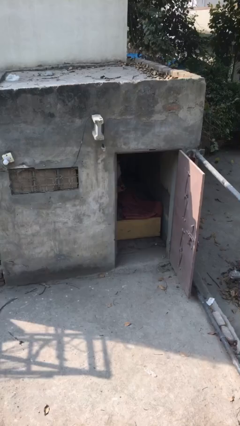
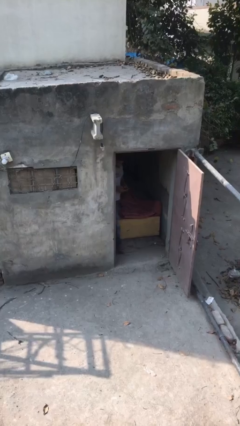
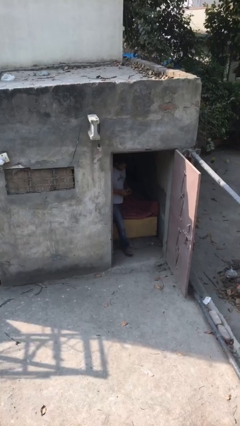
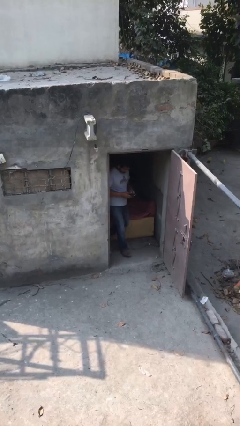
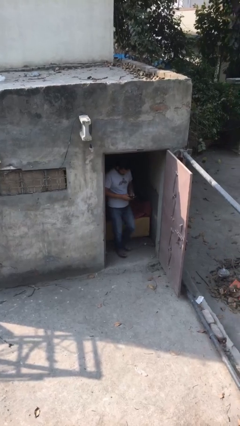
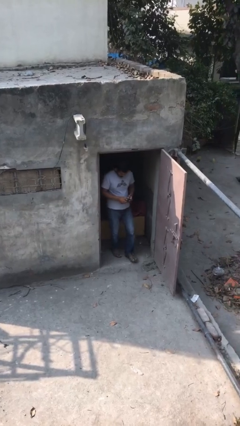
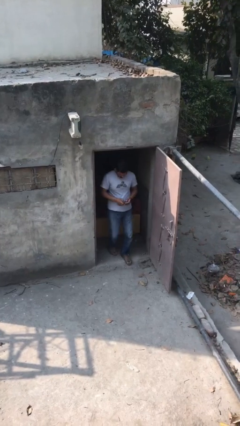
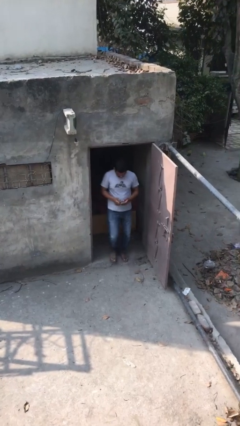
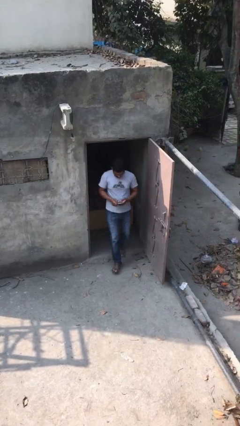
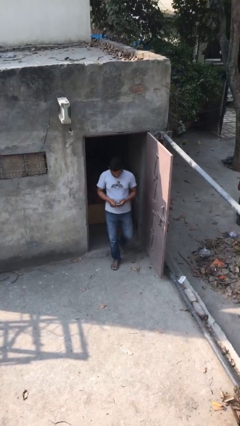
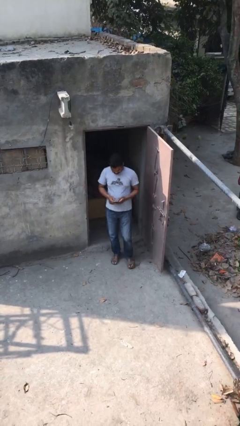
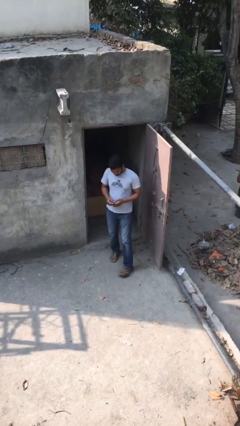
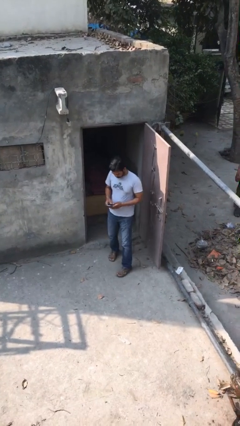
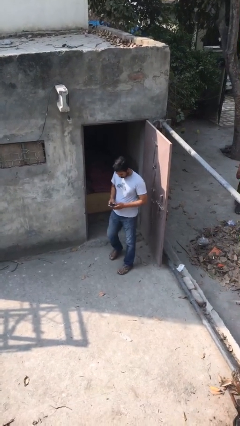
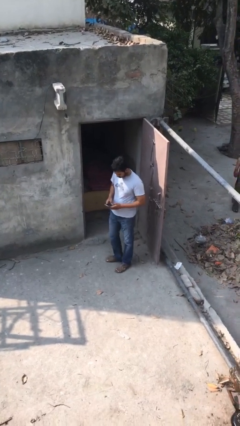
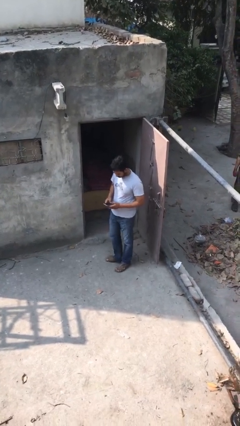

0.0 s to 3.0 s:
person enters scene through structure

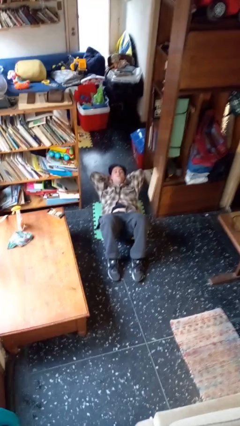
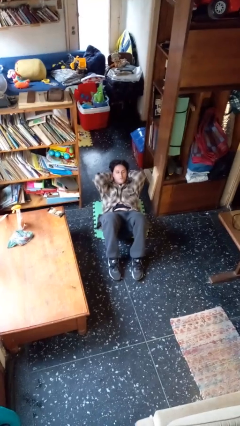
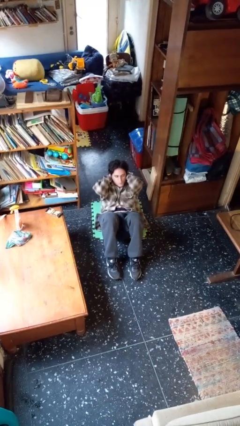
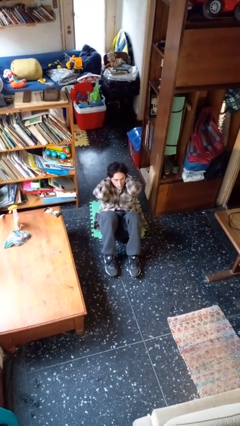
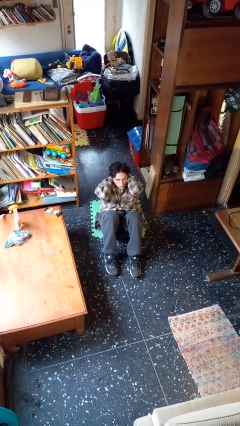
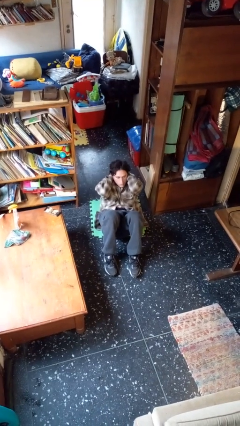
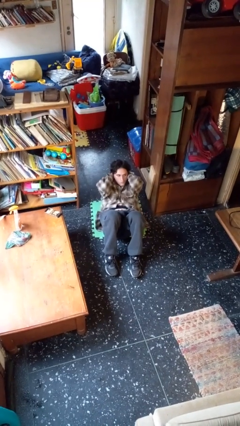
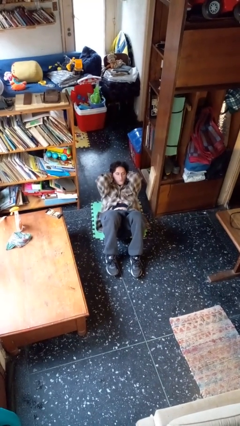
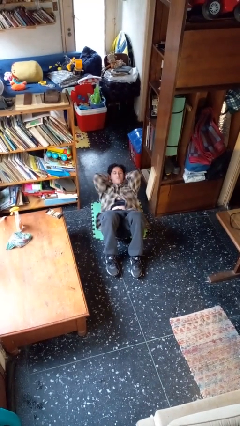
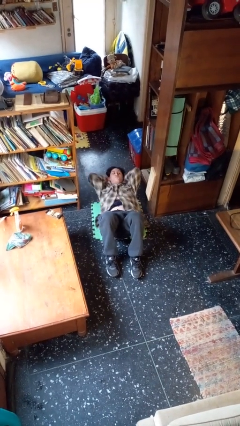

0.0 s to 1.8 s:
person exercises with situp

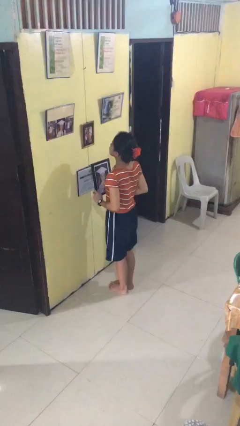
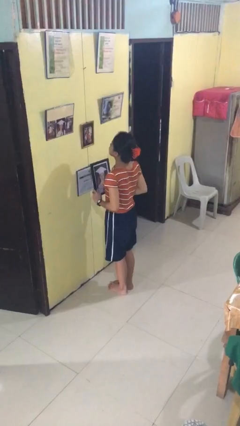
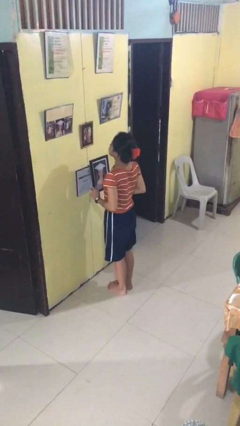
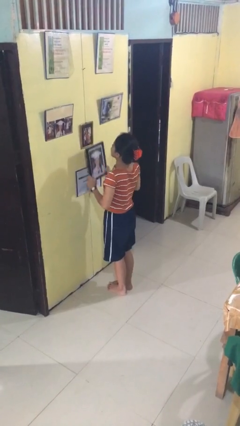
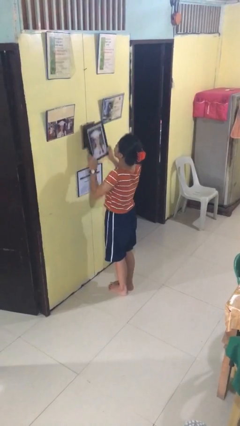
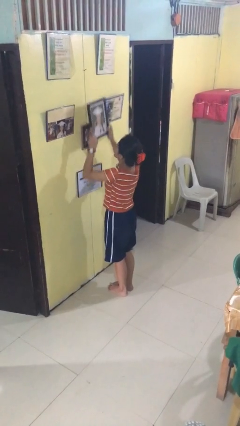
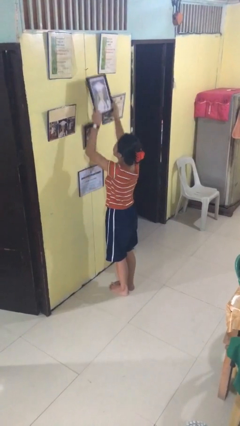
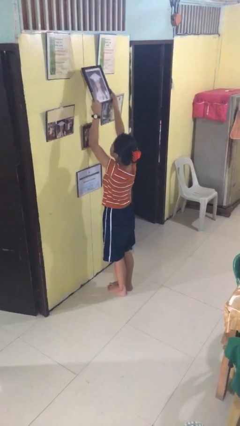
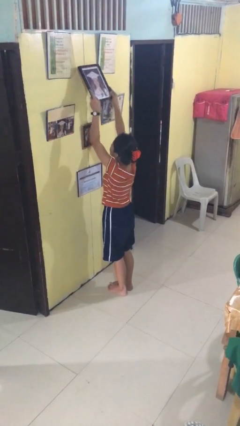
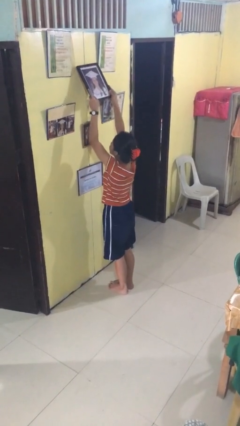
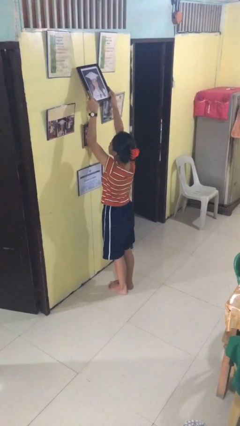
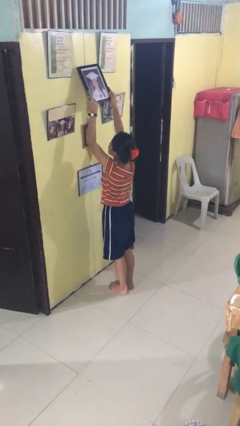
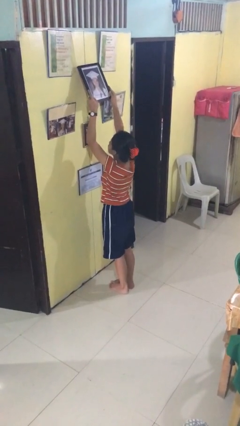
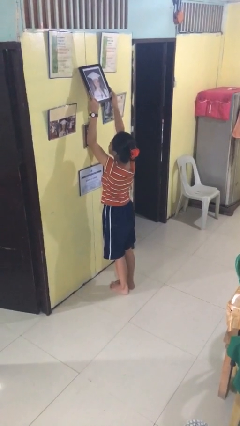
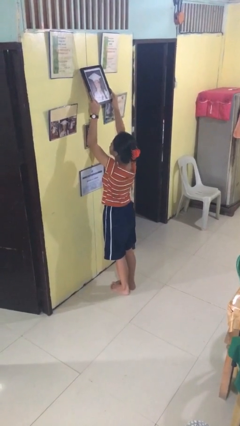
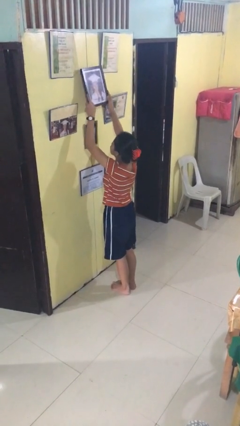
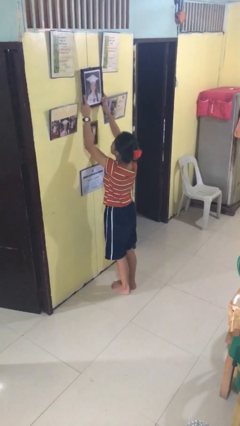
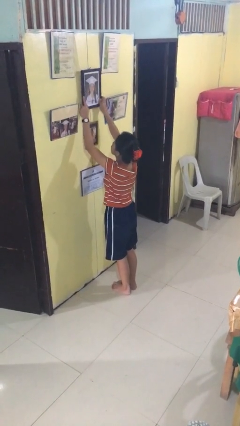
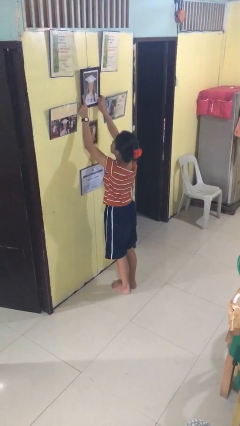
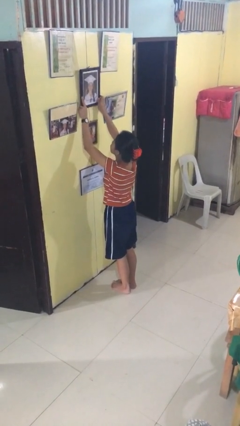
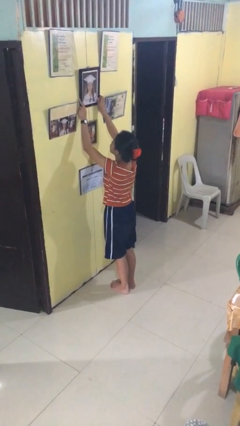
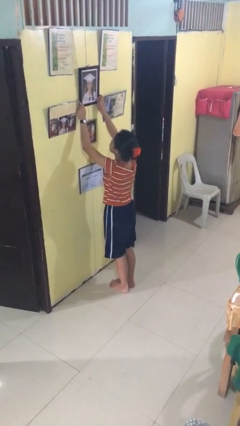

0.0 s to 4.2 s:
person puts up picture frame

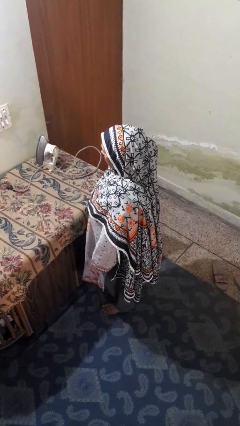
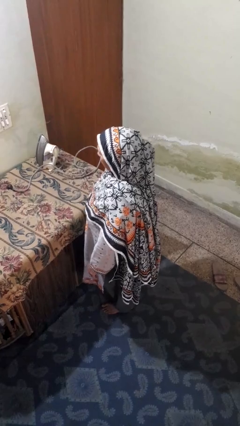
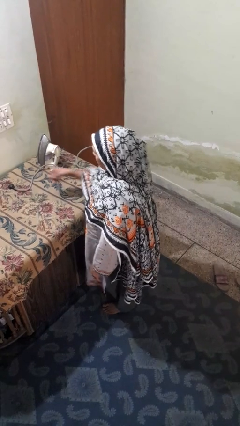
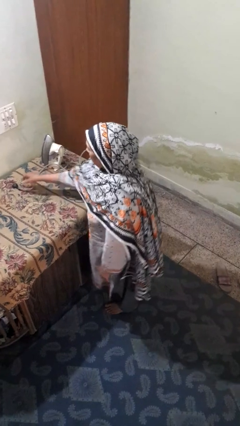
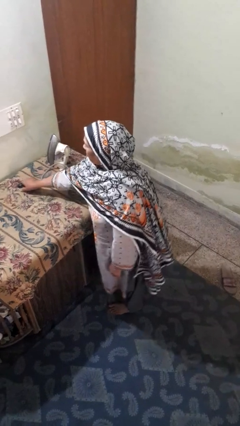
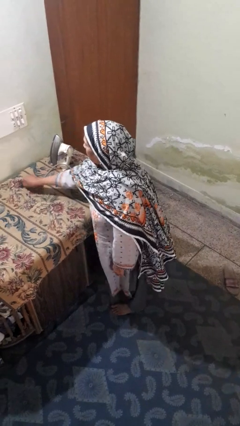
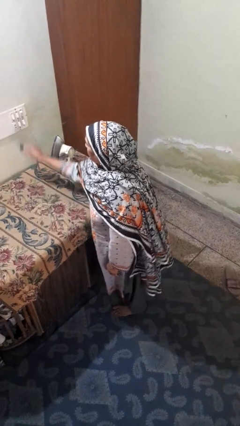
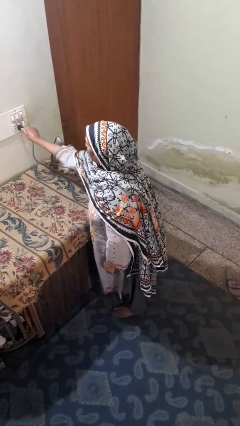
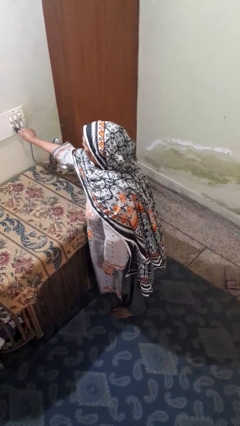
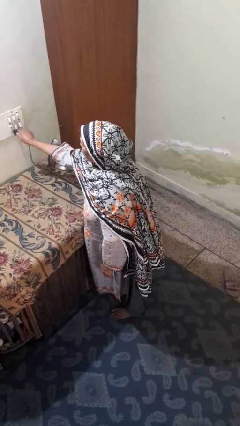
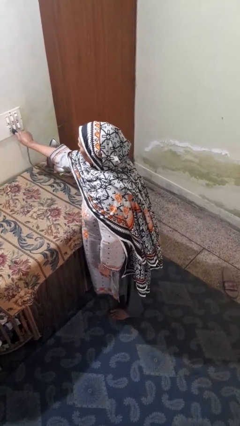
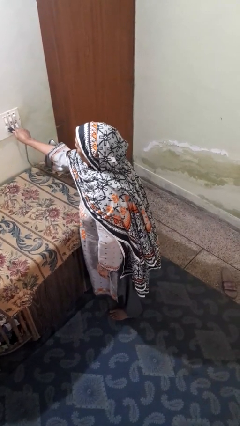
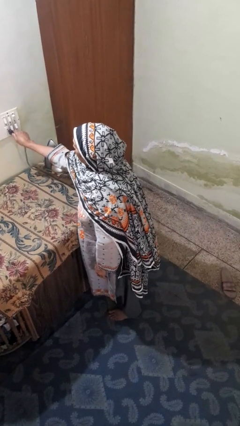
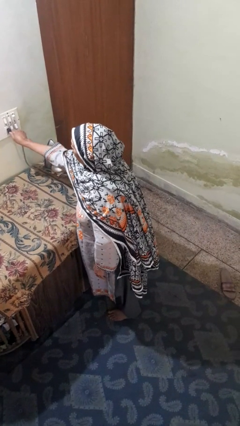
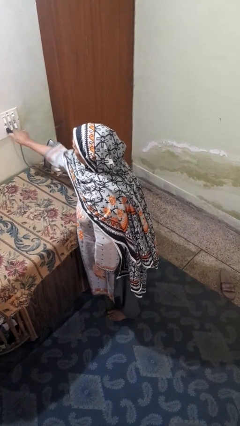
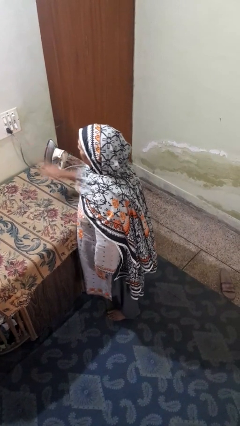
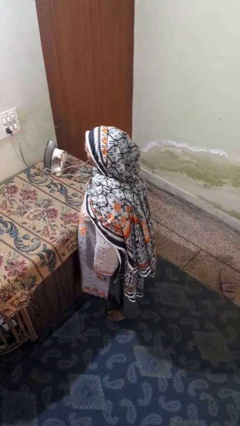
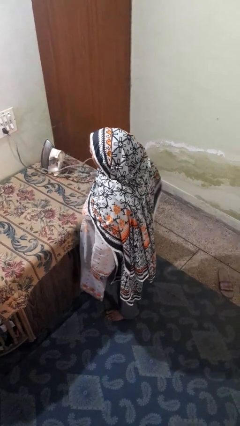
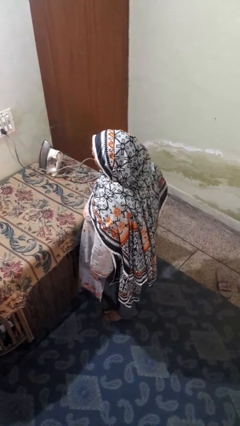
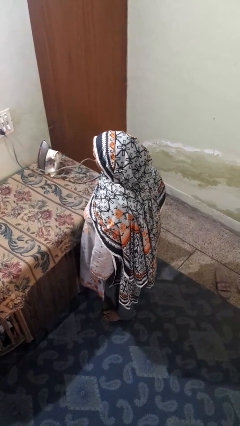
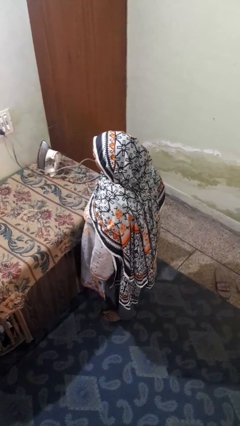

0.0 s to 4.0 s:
person plugs into electrical socket

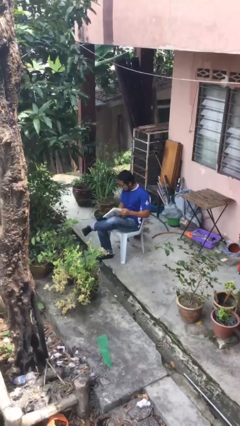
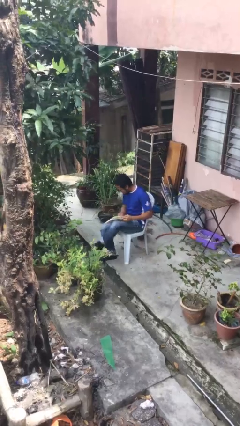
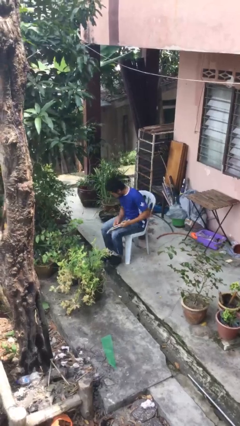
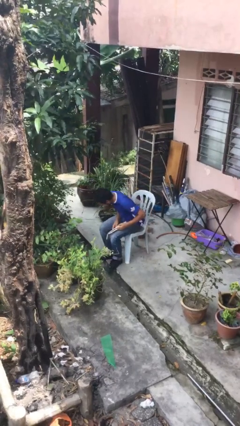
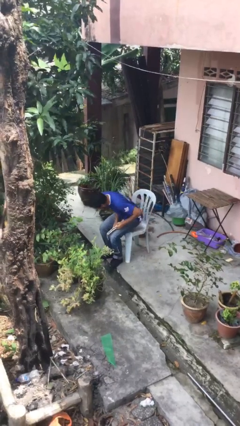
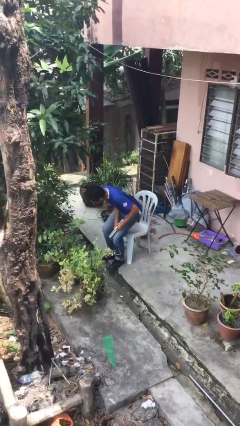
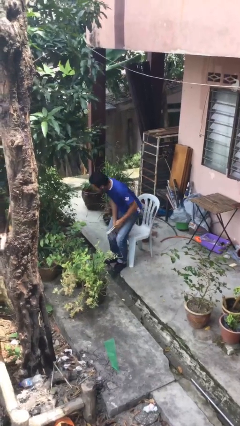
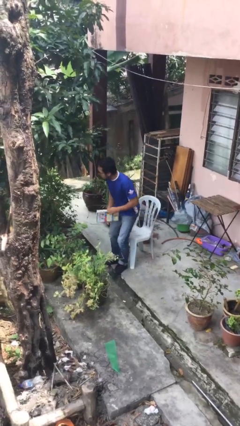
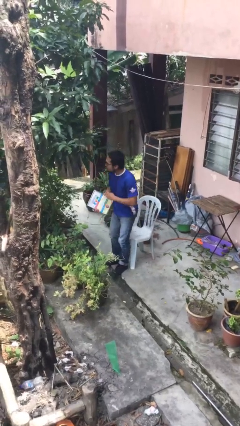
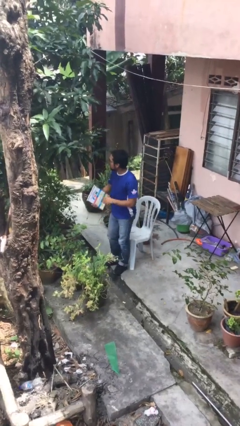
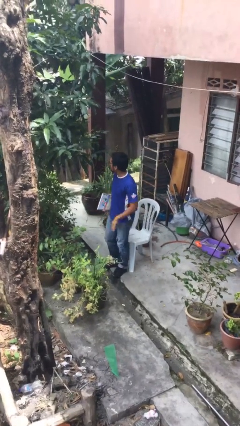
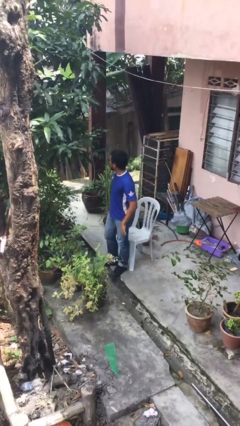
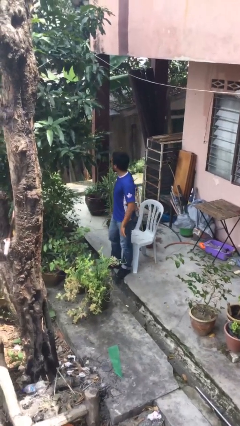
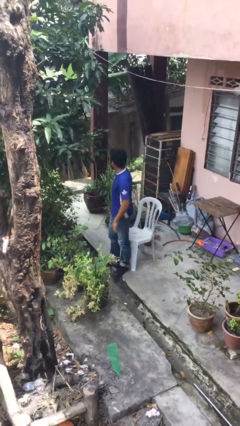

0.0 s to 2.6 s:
person stands up

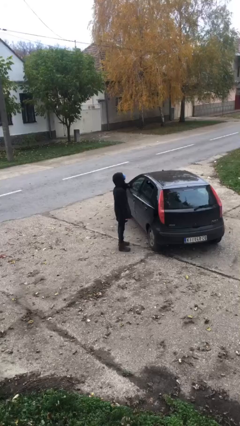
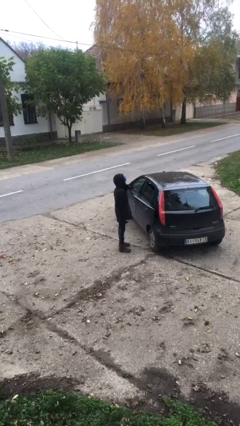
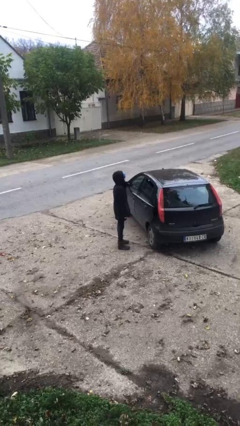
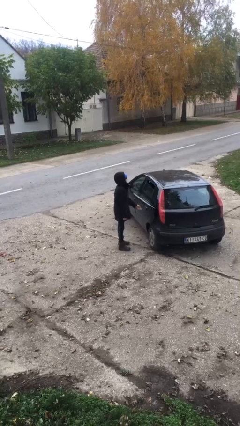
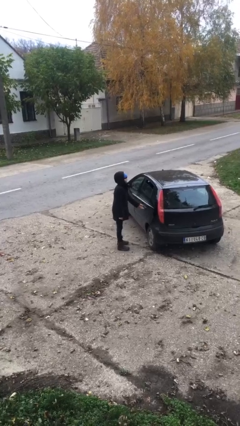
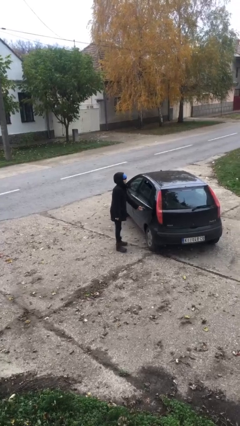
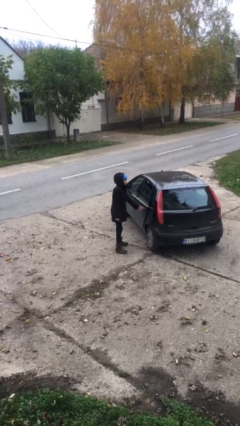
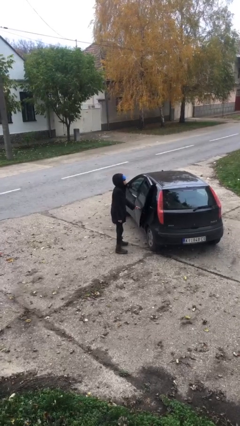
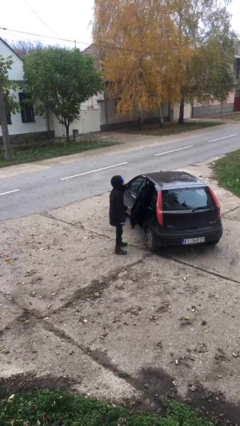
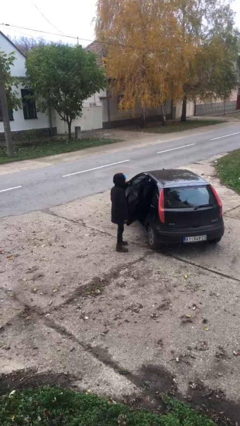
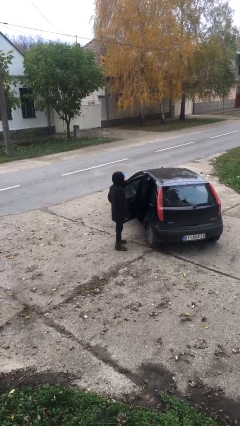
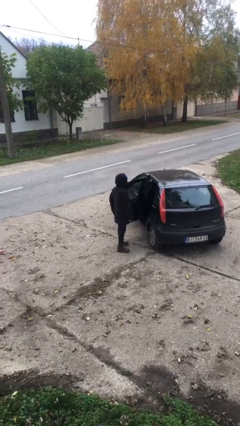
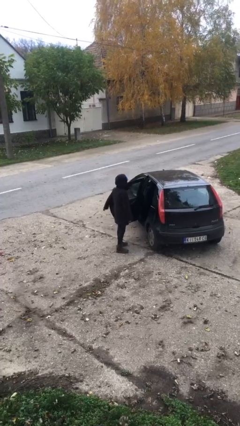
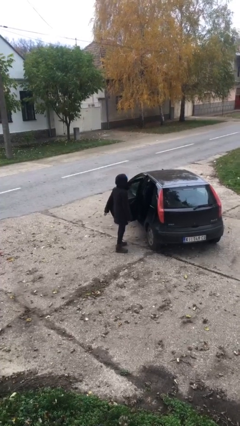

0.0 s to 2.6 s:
person opens car door
